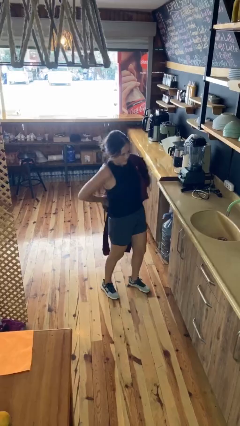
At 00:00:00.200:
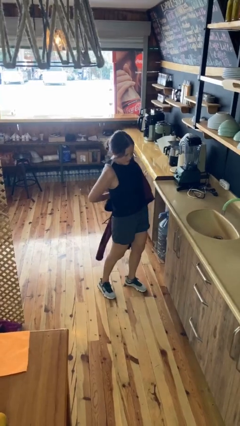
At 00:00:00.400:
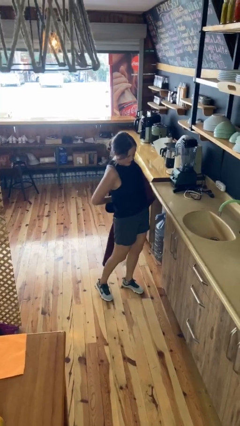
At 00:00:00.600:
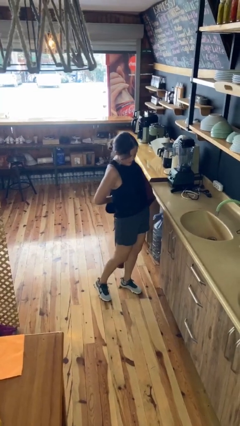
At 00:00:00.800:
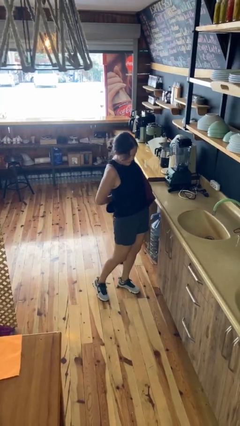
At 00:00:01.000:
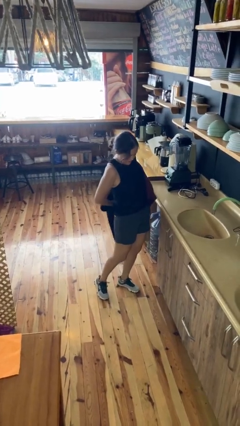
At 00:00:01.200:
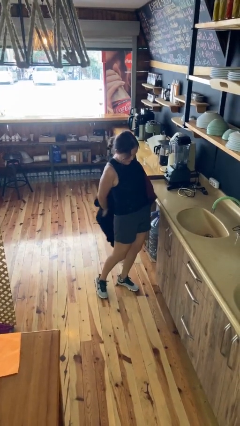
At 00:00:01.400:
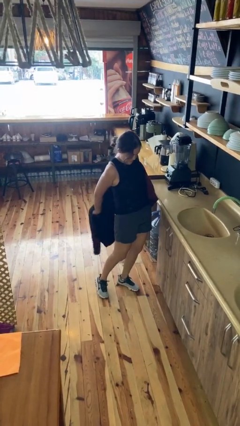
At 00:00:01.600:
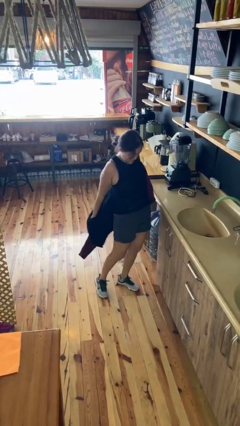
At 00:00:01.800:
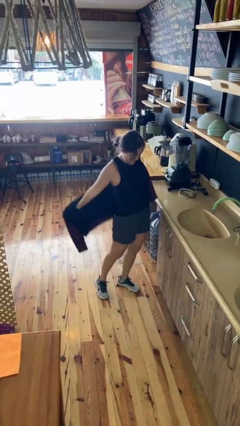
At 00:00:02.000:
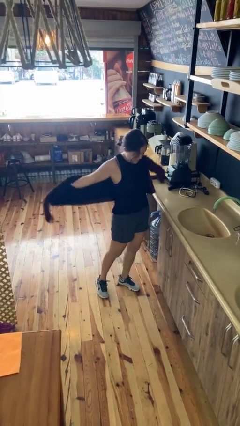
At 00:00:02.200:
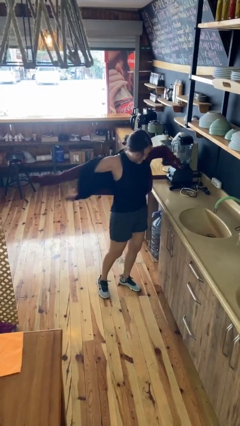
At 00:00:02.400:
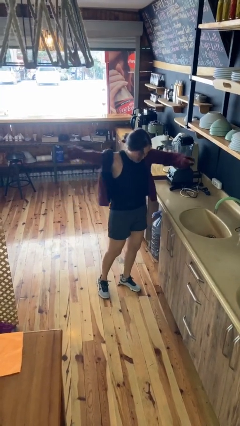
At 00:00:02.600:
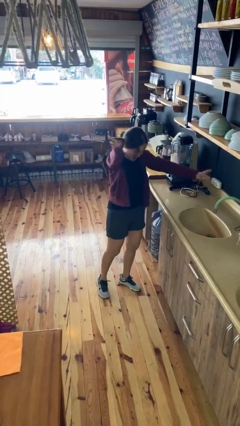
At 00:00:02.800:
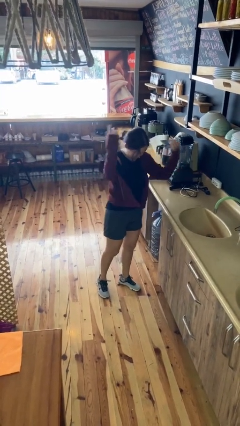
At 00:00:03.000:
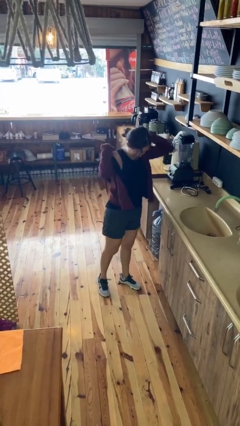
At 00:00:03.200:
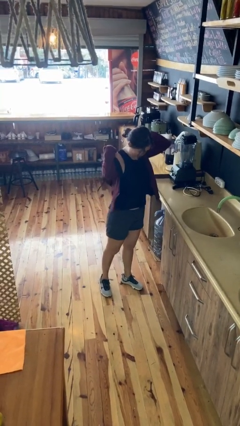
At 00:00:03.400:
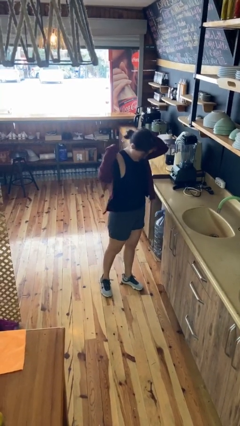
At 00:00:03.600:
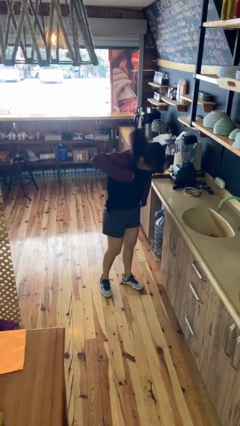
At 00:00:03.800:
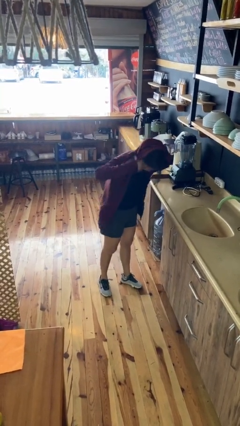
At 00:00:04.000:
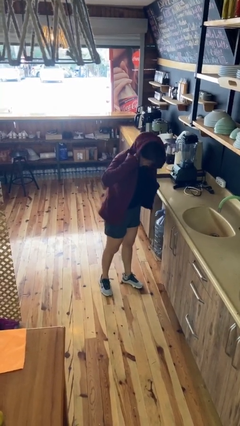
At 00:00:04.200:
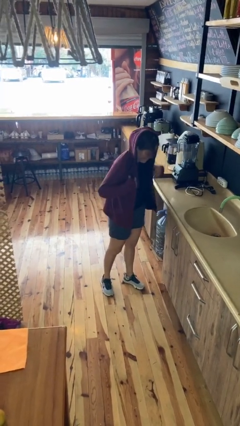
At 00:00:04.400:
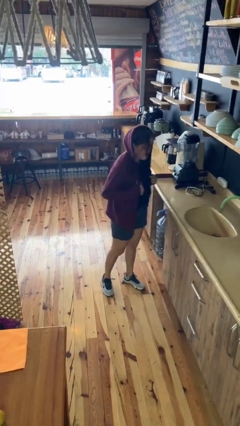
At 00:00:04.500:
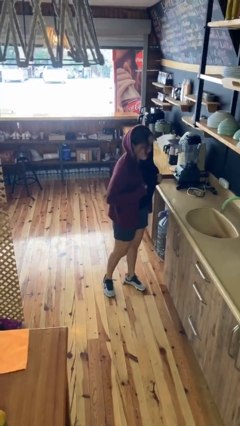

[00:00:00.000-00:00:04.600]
person puts on hoodie

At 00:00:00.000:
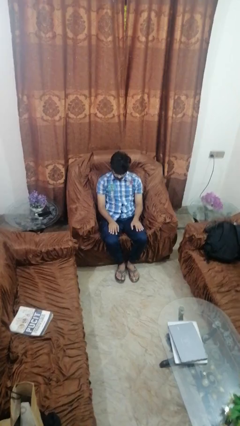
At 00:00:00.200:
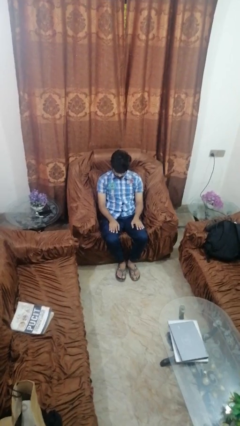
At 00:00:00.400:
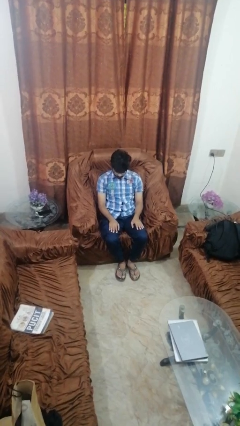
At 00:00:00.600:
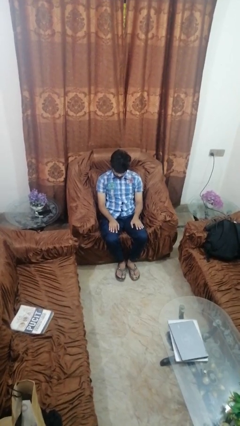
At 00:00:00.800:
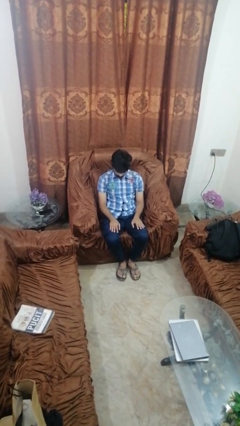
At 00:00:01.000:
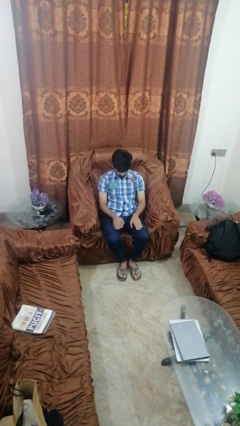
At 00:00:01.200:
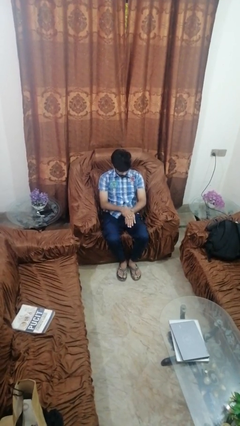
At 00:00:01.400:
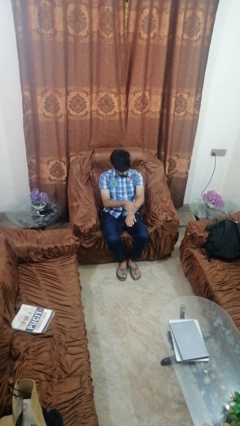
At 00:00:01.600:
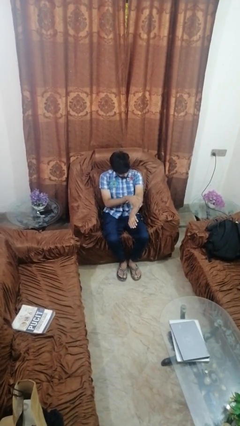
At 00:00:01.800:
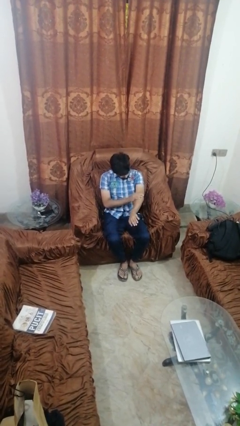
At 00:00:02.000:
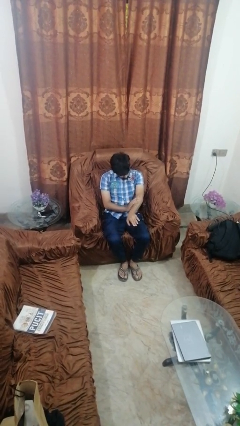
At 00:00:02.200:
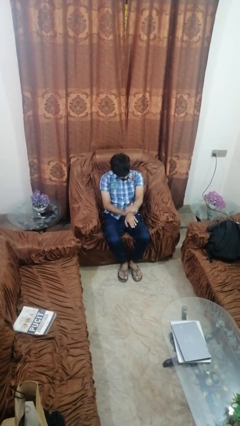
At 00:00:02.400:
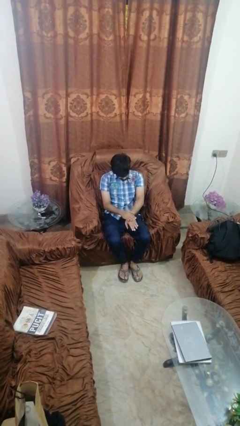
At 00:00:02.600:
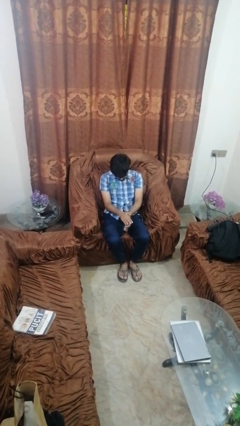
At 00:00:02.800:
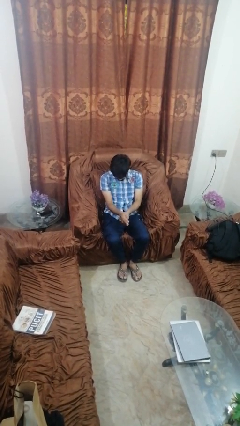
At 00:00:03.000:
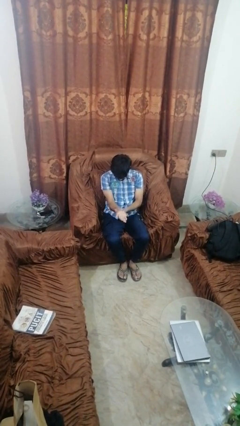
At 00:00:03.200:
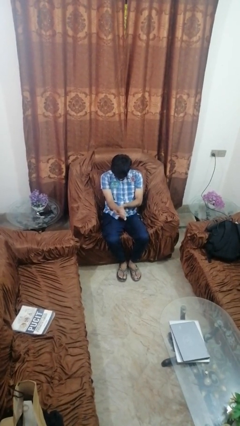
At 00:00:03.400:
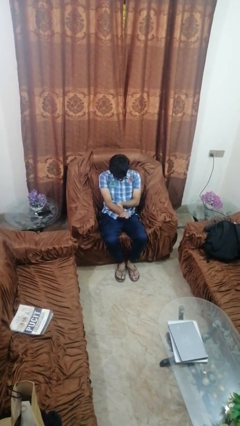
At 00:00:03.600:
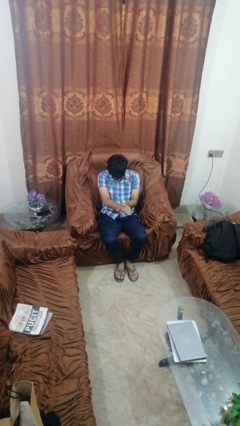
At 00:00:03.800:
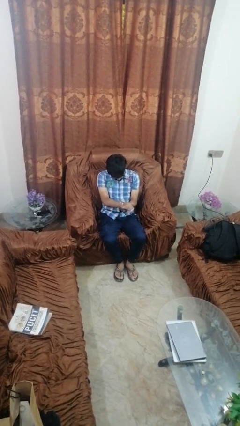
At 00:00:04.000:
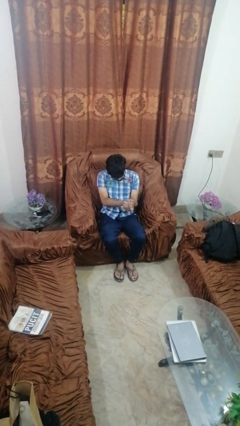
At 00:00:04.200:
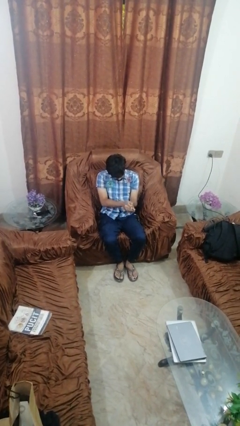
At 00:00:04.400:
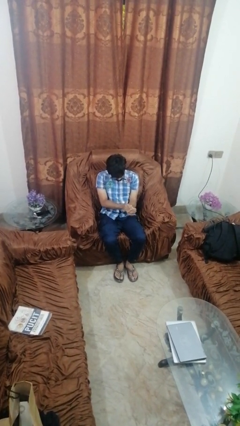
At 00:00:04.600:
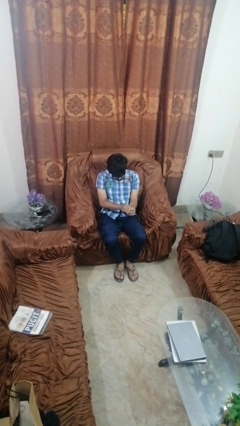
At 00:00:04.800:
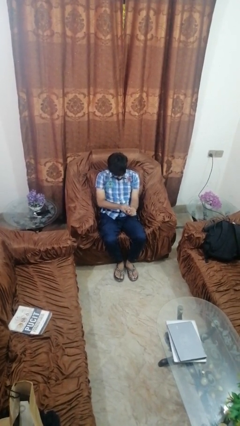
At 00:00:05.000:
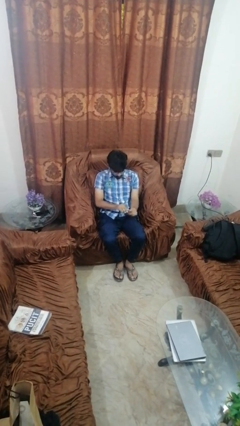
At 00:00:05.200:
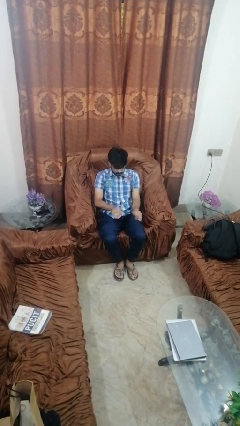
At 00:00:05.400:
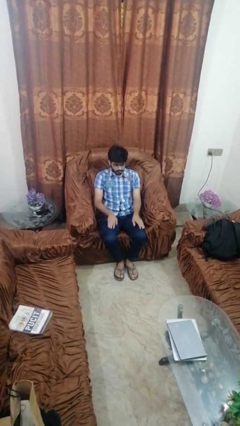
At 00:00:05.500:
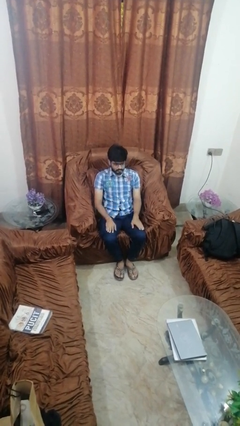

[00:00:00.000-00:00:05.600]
person looks at hands in lap

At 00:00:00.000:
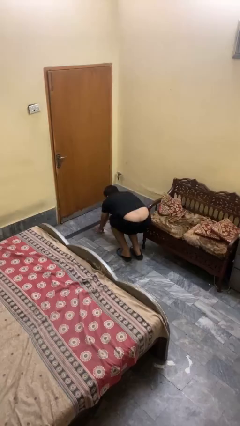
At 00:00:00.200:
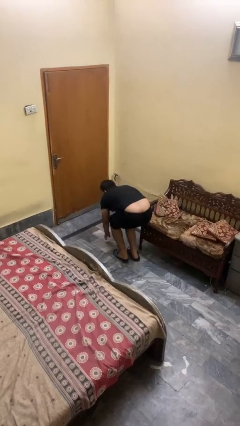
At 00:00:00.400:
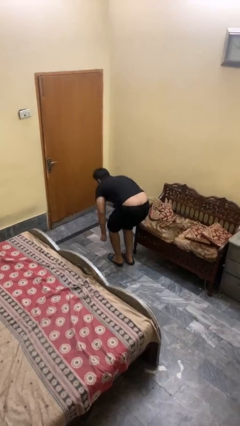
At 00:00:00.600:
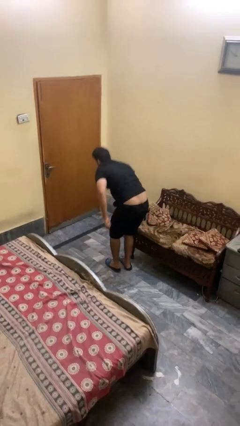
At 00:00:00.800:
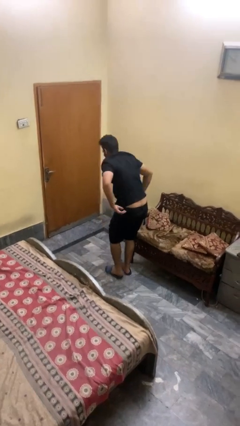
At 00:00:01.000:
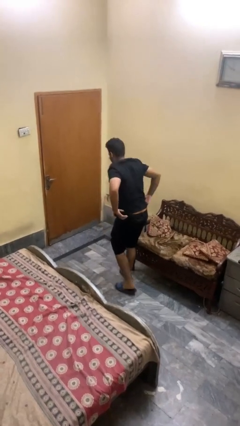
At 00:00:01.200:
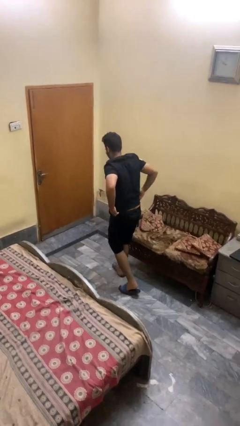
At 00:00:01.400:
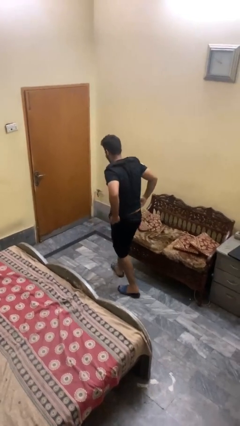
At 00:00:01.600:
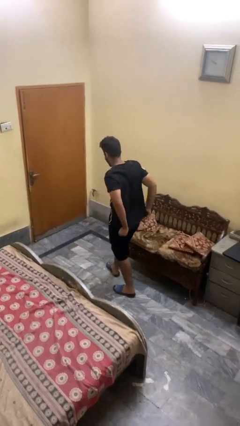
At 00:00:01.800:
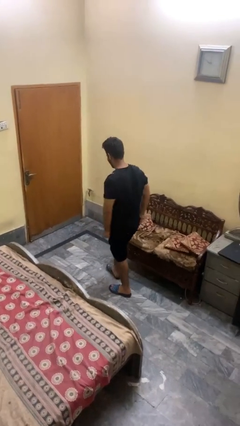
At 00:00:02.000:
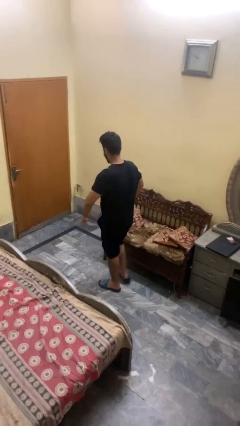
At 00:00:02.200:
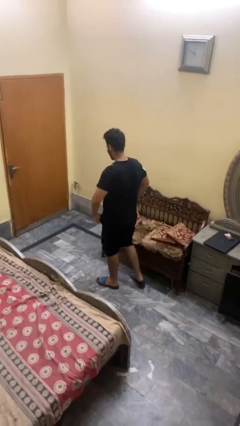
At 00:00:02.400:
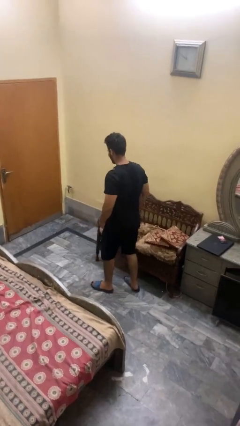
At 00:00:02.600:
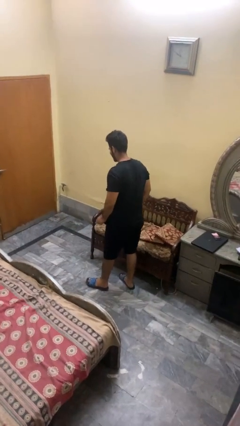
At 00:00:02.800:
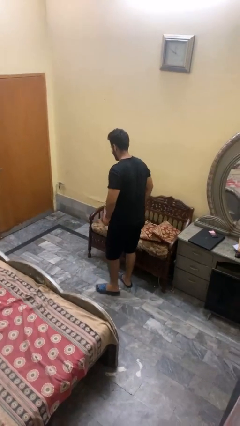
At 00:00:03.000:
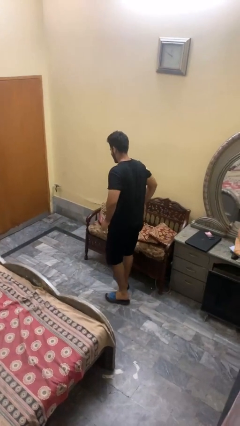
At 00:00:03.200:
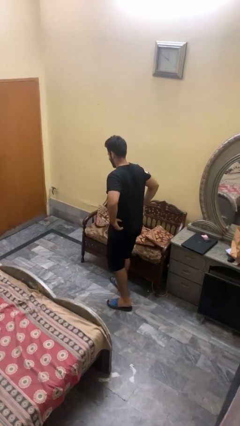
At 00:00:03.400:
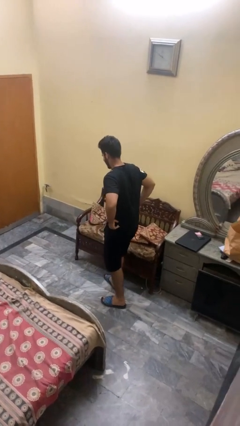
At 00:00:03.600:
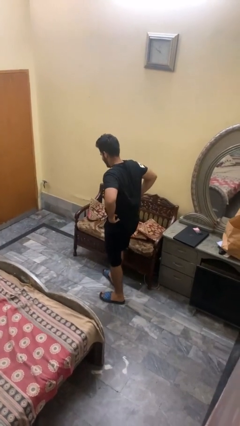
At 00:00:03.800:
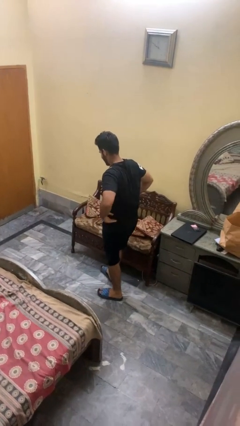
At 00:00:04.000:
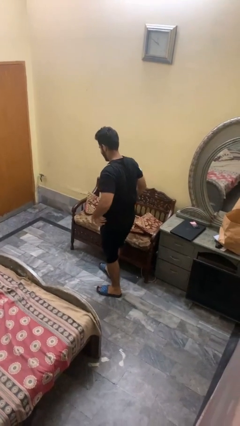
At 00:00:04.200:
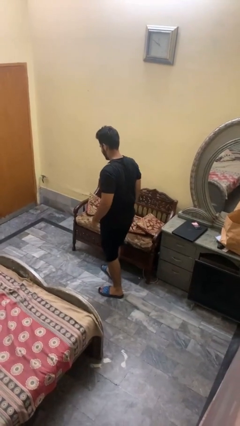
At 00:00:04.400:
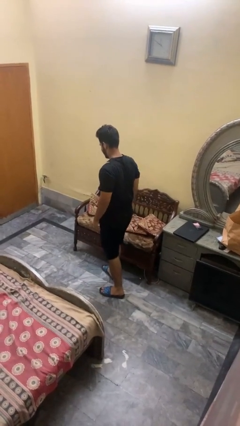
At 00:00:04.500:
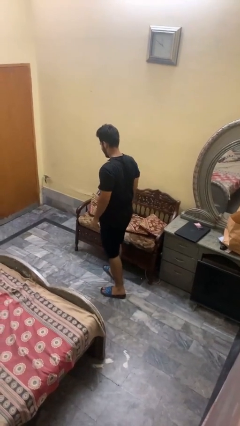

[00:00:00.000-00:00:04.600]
person stands up from floor

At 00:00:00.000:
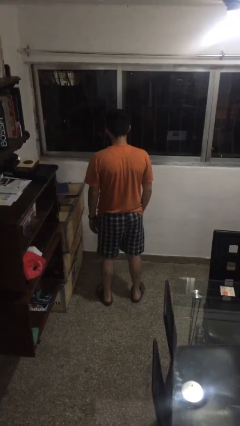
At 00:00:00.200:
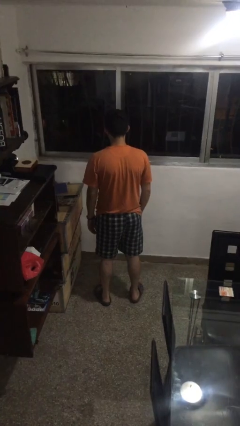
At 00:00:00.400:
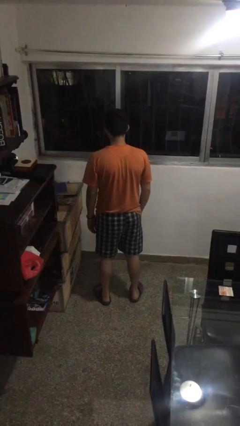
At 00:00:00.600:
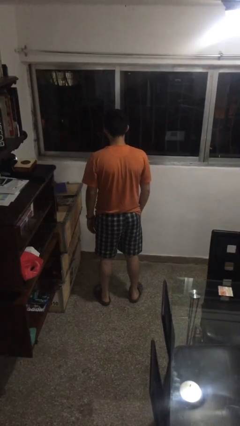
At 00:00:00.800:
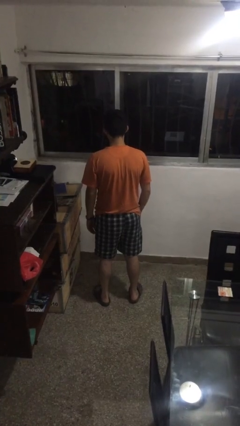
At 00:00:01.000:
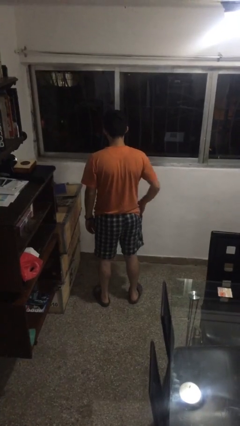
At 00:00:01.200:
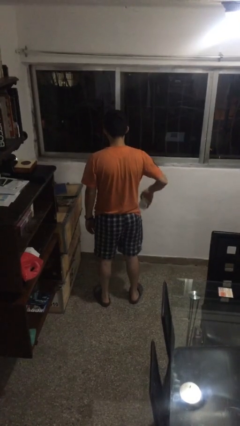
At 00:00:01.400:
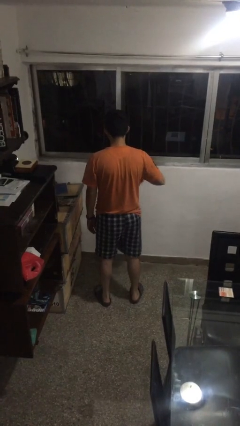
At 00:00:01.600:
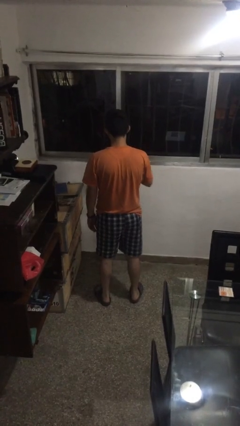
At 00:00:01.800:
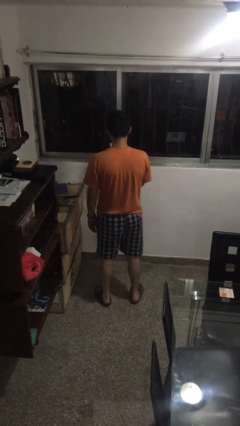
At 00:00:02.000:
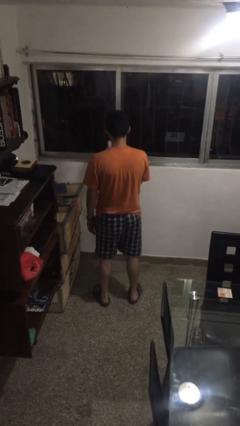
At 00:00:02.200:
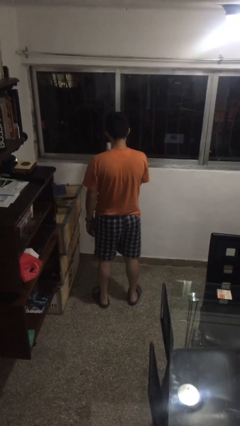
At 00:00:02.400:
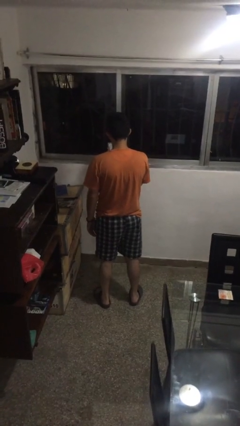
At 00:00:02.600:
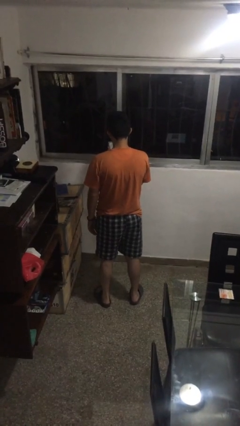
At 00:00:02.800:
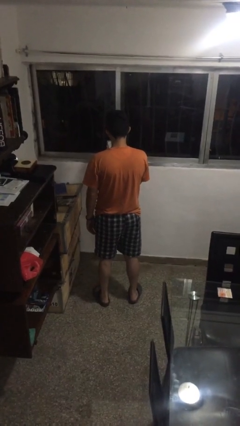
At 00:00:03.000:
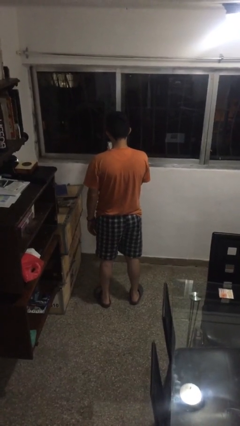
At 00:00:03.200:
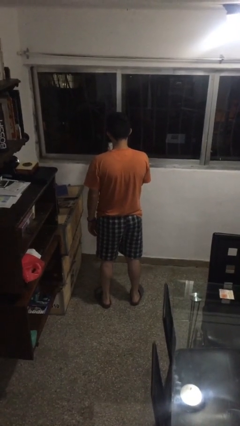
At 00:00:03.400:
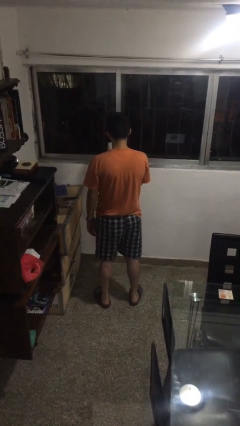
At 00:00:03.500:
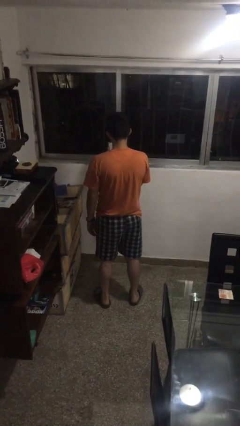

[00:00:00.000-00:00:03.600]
person takes phone from pocket
